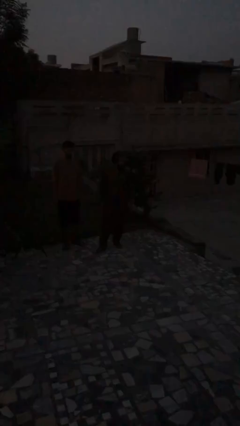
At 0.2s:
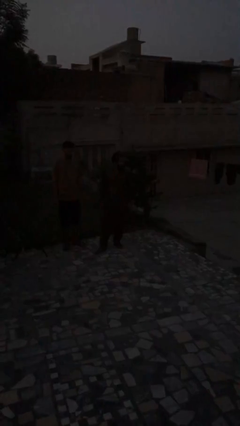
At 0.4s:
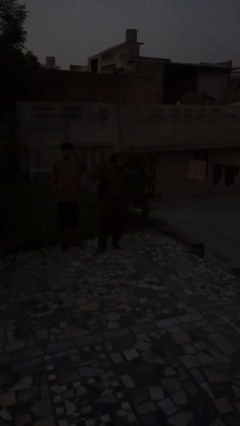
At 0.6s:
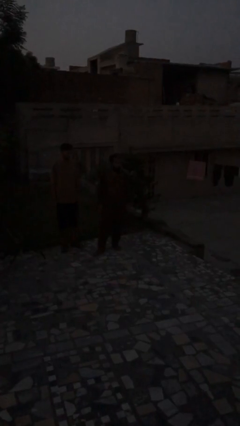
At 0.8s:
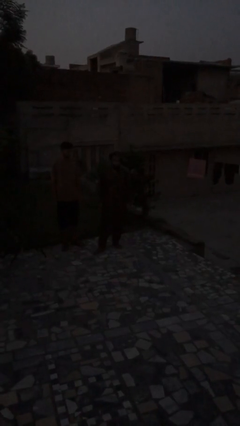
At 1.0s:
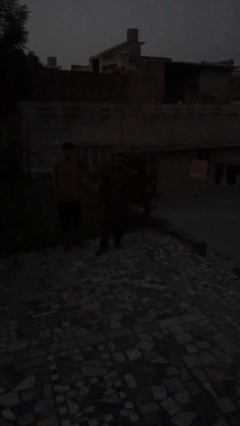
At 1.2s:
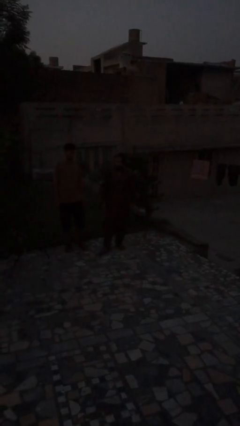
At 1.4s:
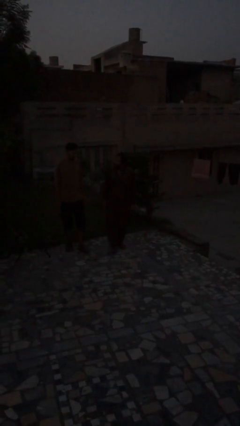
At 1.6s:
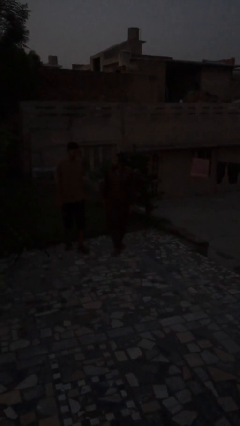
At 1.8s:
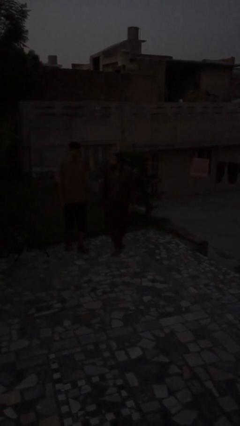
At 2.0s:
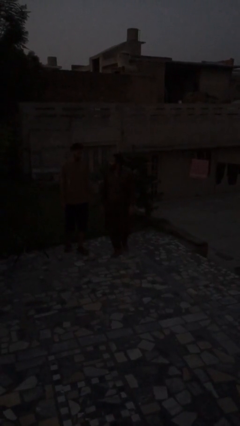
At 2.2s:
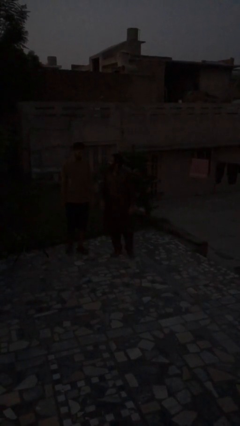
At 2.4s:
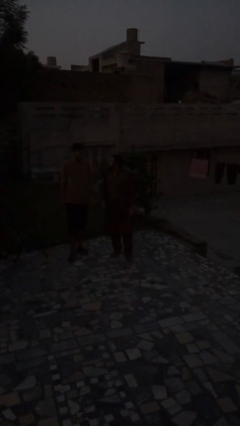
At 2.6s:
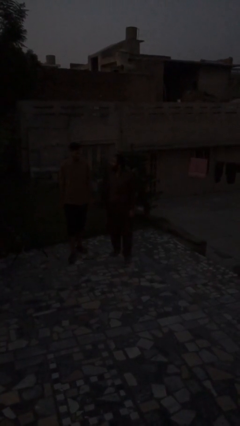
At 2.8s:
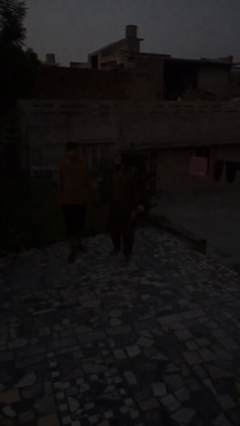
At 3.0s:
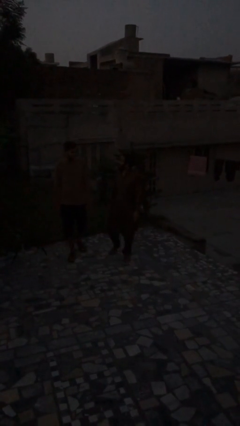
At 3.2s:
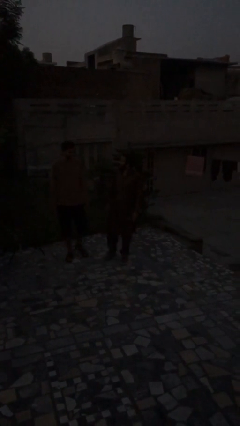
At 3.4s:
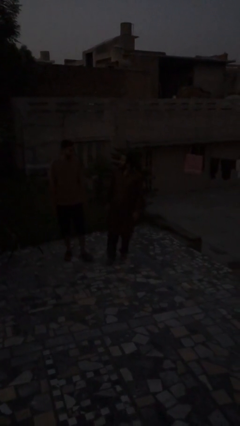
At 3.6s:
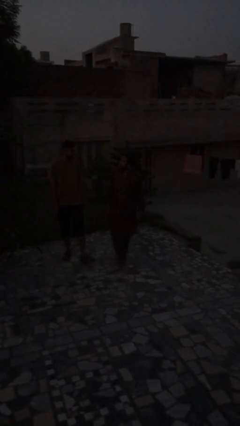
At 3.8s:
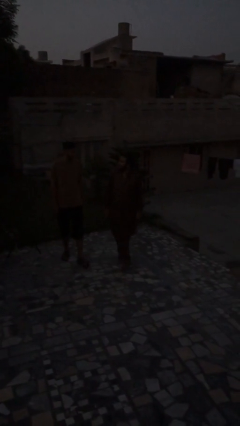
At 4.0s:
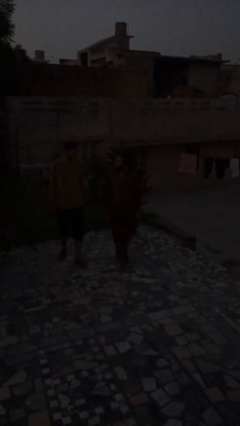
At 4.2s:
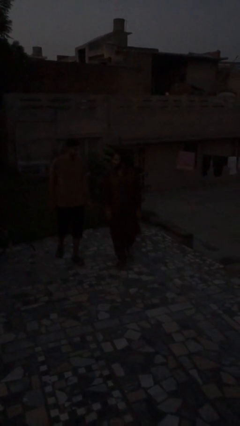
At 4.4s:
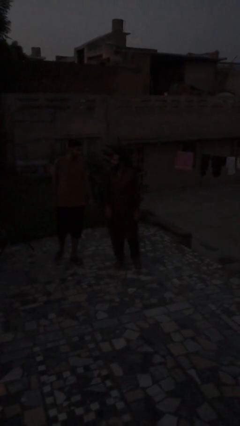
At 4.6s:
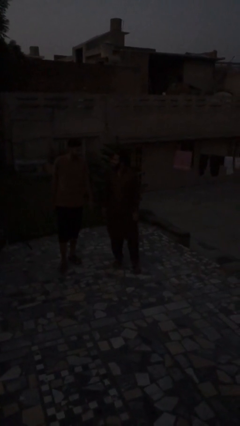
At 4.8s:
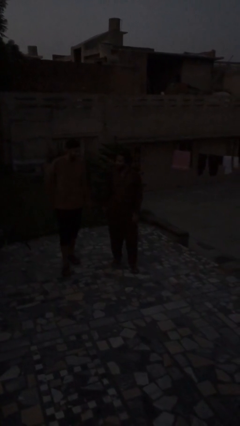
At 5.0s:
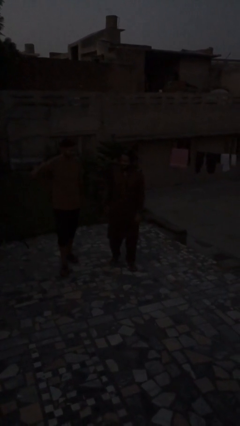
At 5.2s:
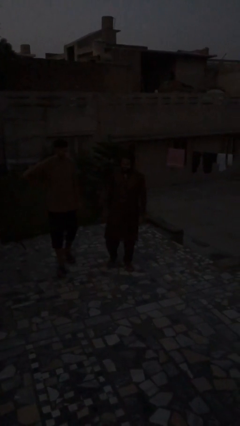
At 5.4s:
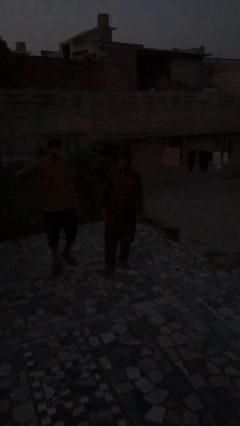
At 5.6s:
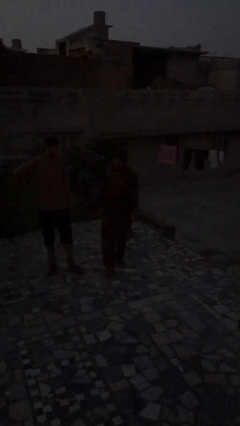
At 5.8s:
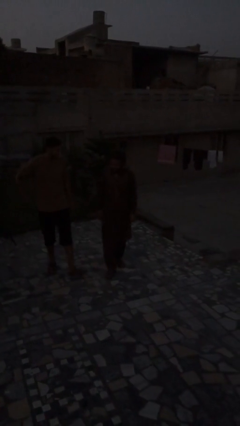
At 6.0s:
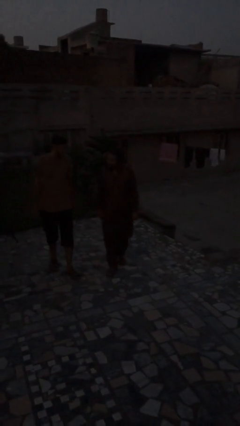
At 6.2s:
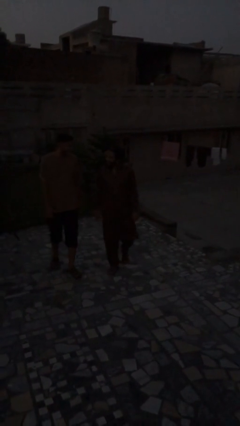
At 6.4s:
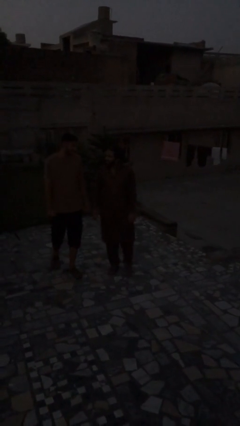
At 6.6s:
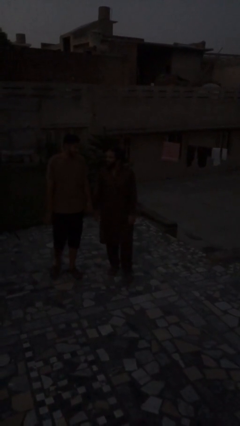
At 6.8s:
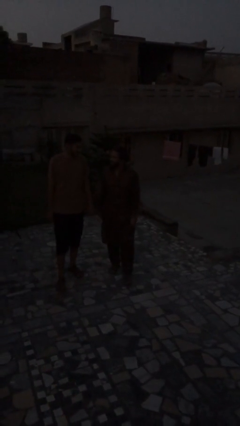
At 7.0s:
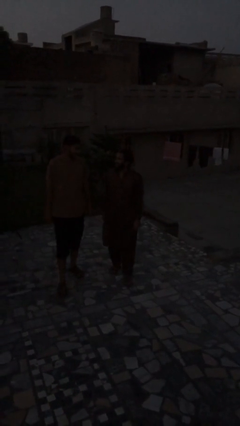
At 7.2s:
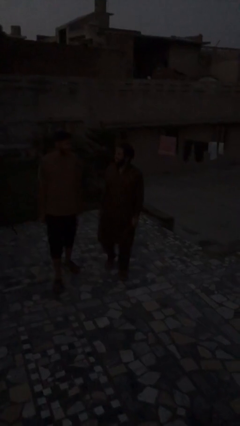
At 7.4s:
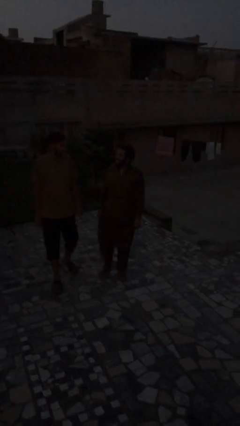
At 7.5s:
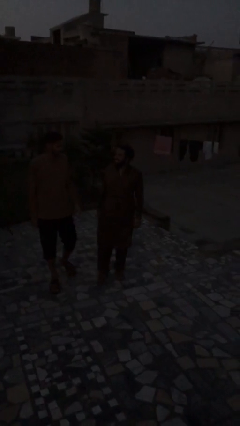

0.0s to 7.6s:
person talks to person

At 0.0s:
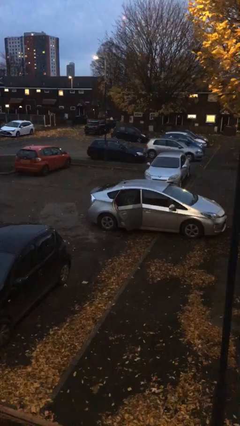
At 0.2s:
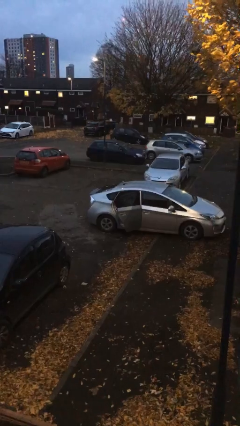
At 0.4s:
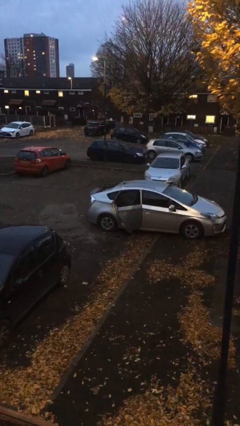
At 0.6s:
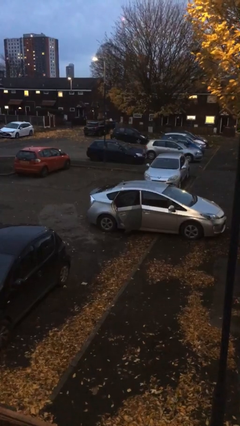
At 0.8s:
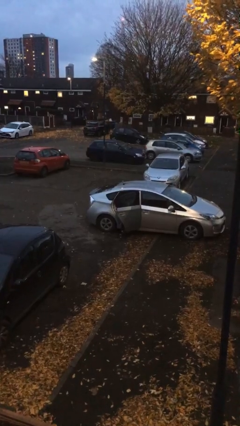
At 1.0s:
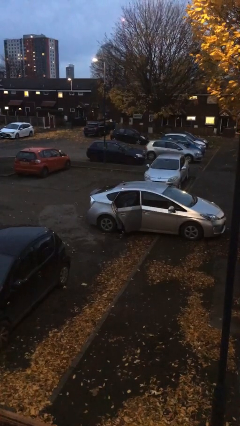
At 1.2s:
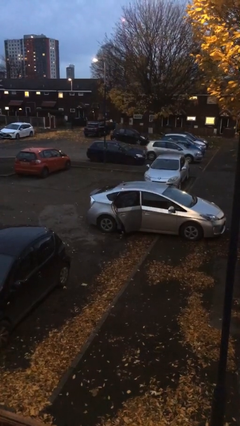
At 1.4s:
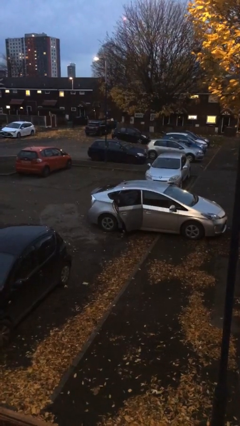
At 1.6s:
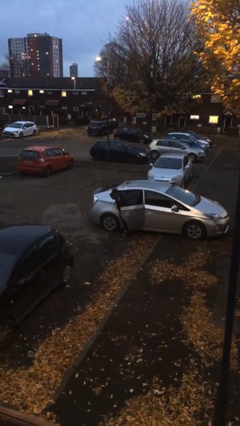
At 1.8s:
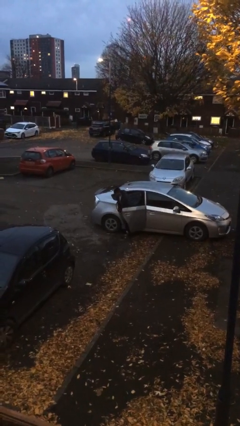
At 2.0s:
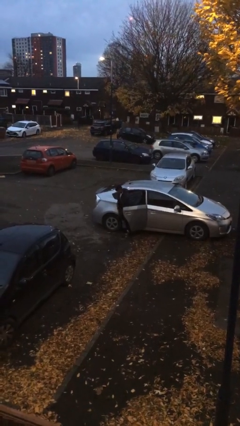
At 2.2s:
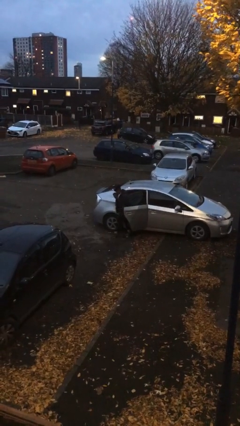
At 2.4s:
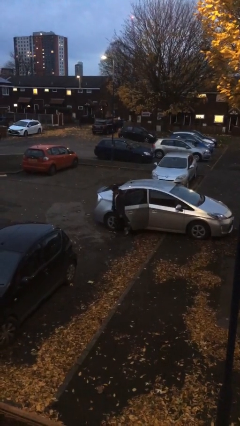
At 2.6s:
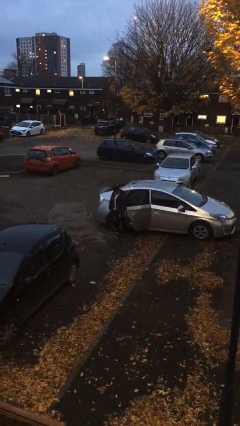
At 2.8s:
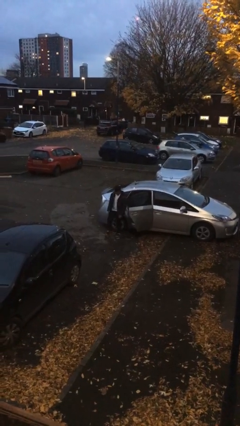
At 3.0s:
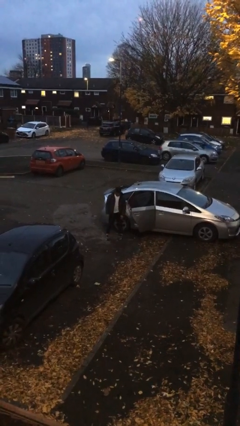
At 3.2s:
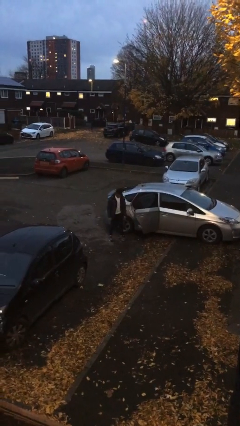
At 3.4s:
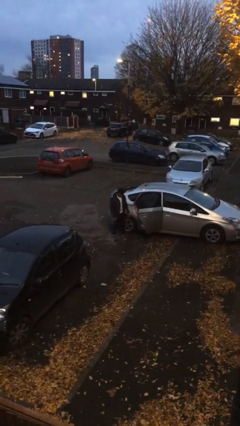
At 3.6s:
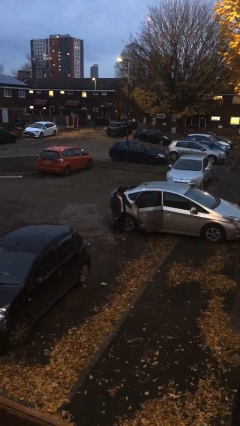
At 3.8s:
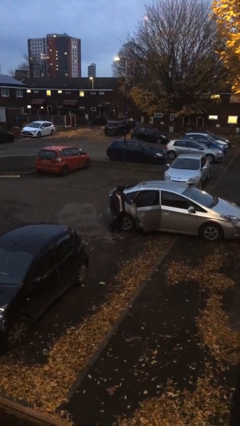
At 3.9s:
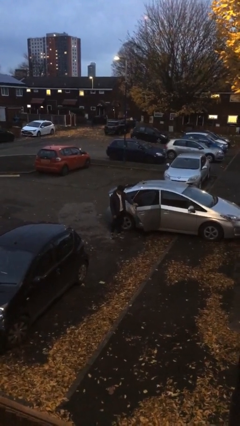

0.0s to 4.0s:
person exits car

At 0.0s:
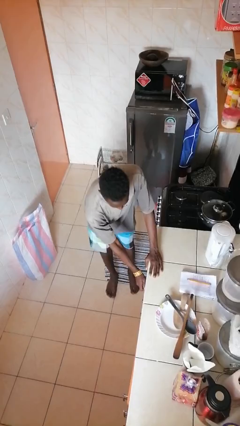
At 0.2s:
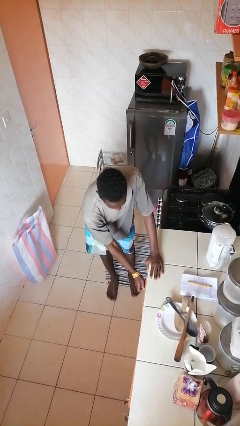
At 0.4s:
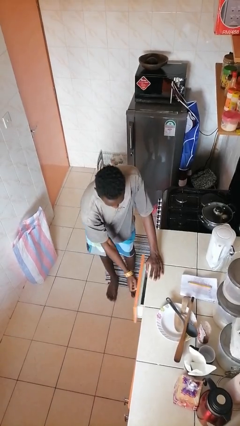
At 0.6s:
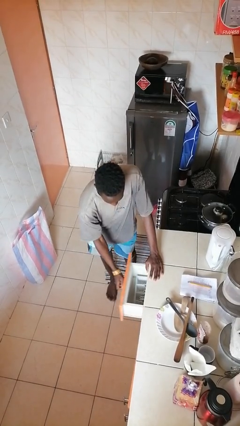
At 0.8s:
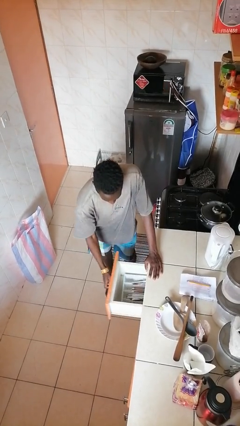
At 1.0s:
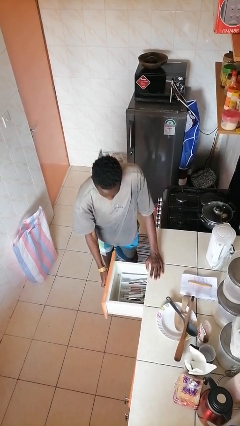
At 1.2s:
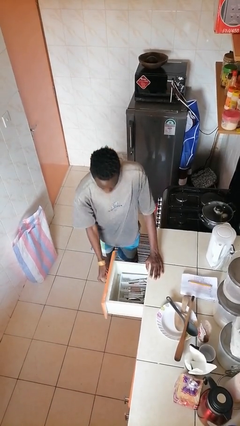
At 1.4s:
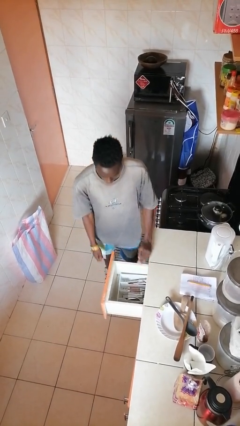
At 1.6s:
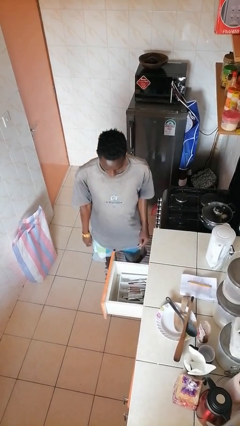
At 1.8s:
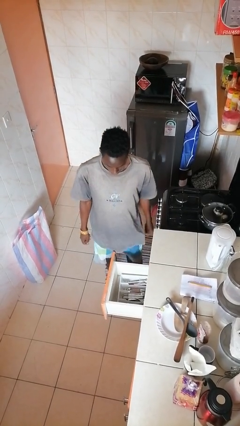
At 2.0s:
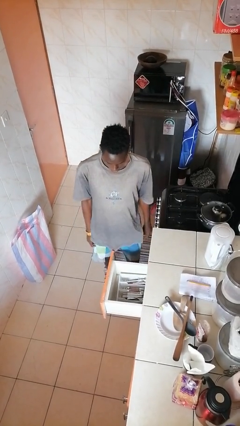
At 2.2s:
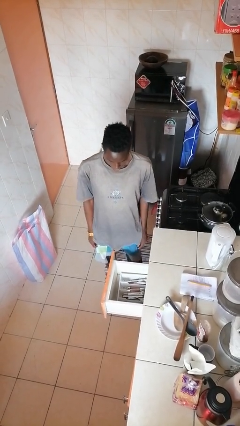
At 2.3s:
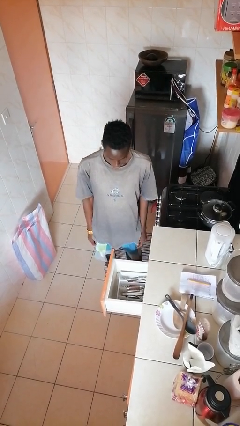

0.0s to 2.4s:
person opens kitchen drawer

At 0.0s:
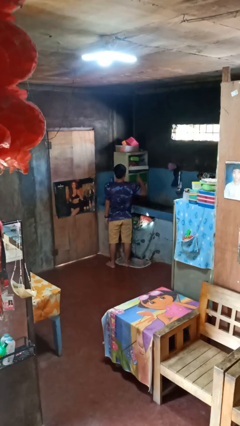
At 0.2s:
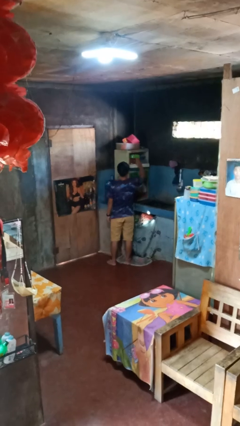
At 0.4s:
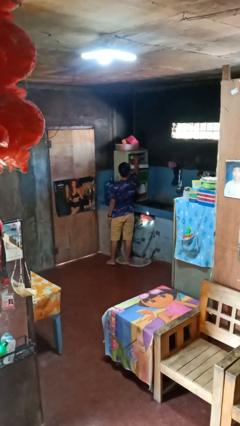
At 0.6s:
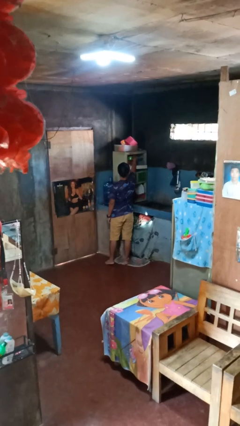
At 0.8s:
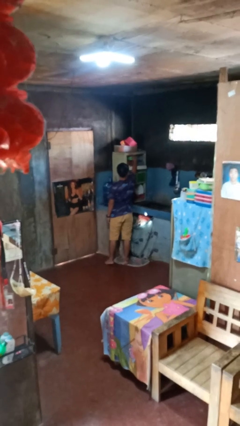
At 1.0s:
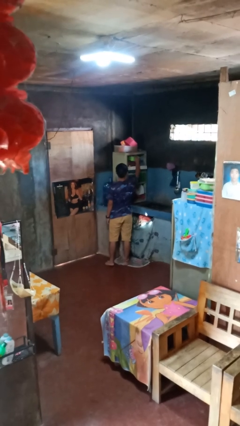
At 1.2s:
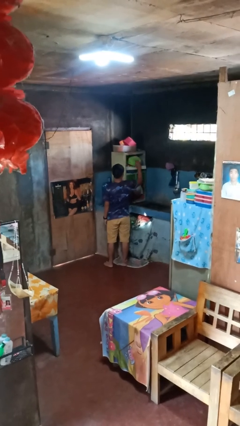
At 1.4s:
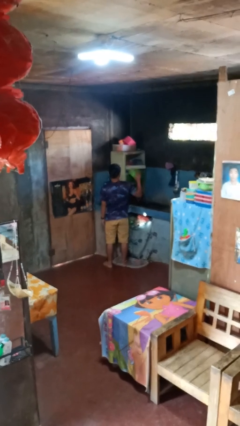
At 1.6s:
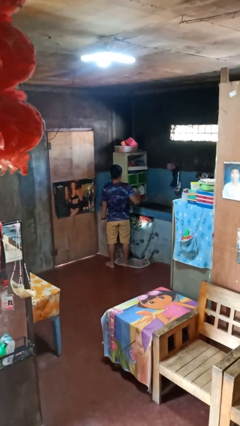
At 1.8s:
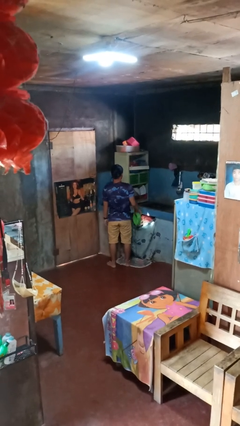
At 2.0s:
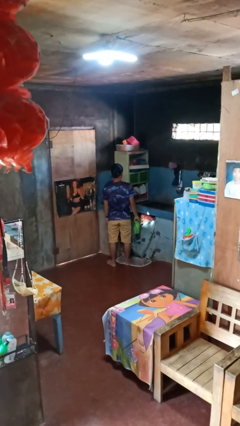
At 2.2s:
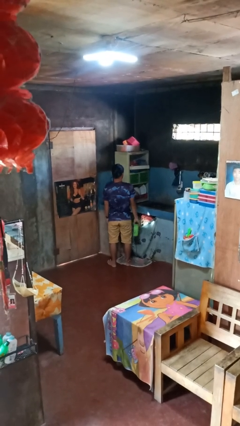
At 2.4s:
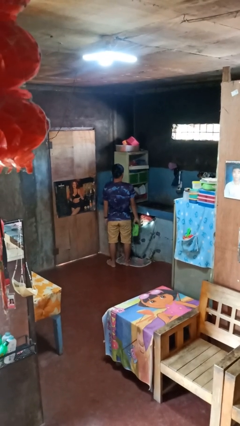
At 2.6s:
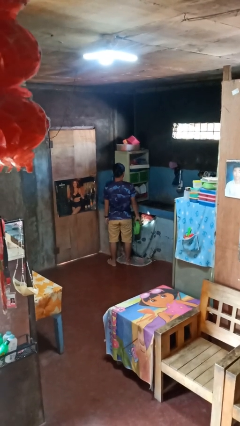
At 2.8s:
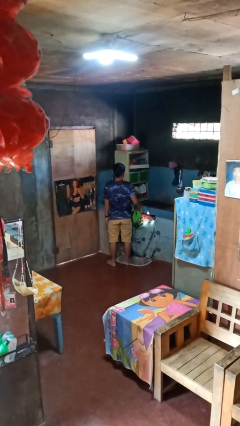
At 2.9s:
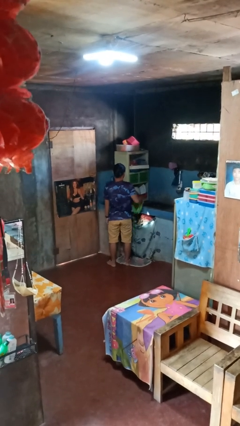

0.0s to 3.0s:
person takes object from cabinet

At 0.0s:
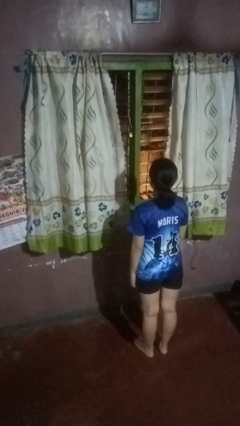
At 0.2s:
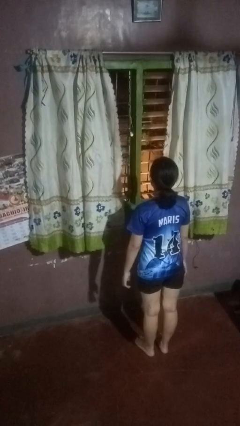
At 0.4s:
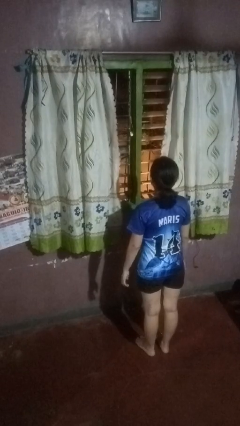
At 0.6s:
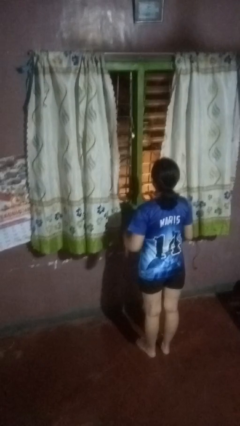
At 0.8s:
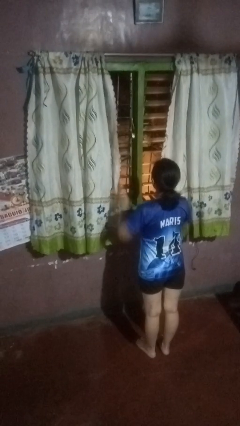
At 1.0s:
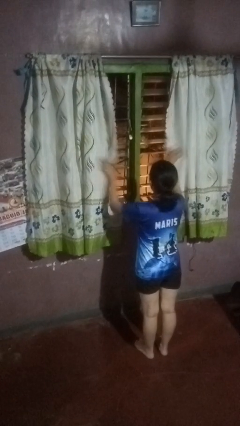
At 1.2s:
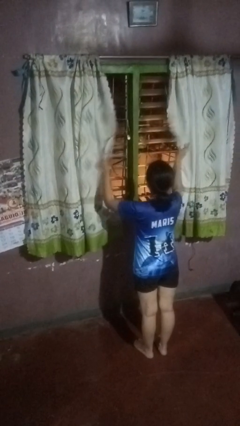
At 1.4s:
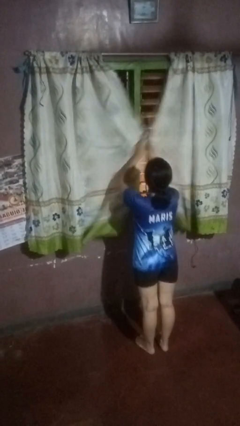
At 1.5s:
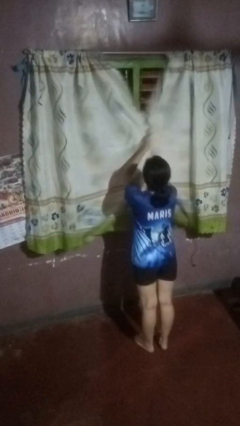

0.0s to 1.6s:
person closes curtains
